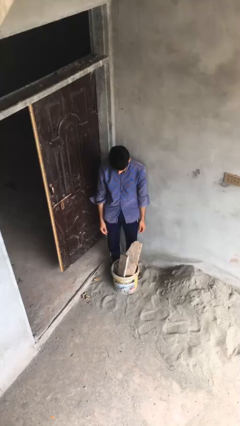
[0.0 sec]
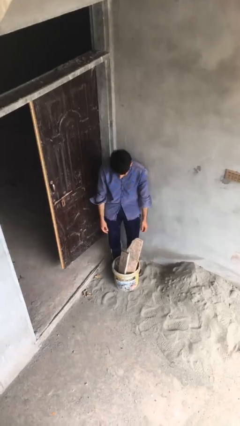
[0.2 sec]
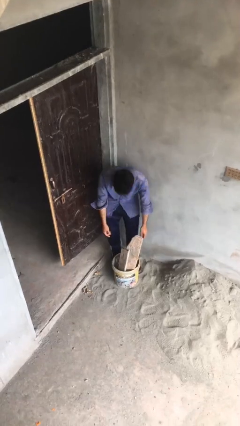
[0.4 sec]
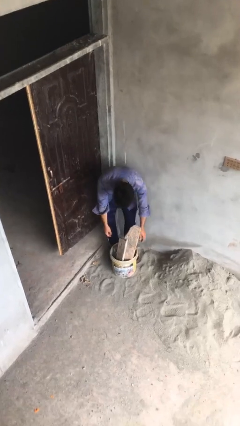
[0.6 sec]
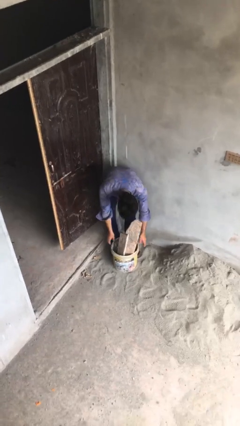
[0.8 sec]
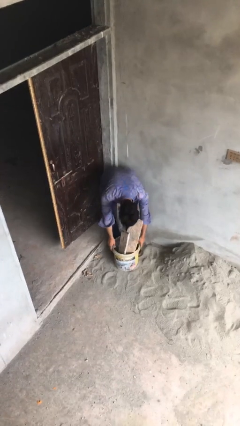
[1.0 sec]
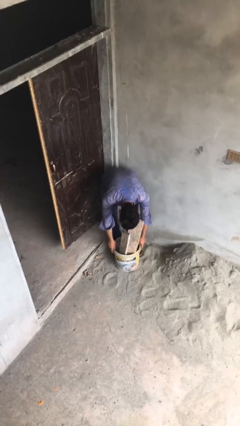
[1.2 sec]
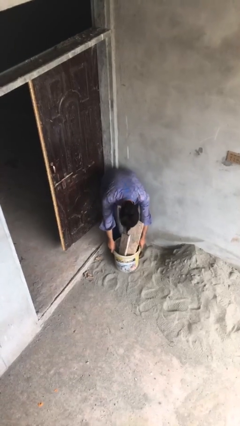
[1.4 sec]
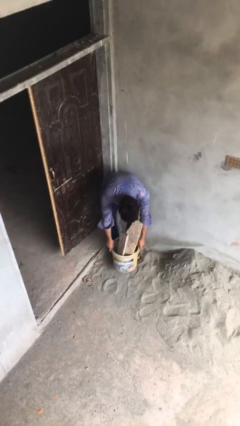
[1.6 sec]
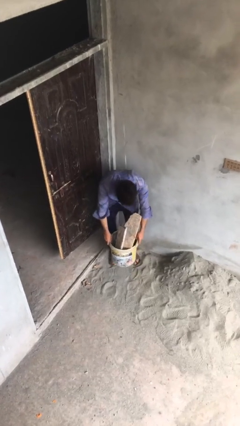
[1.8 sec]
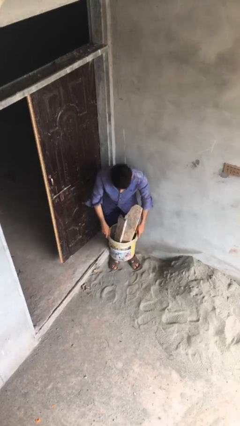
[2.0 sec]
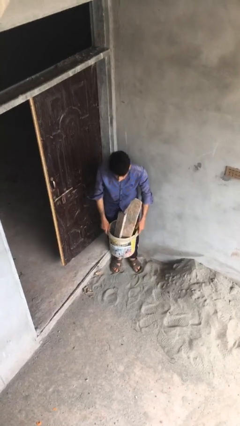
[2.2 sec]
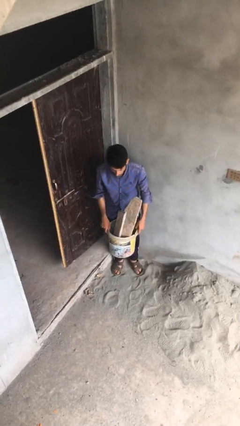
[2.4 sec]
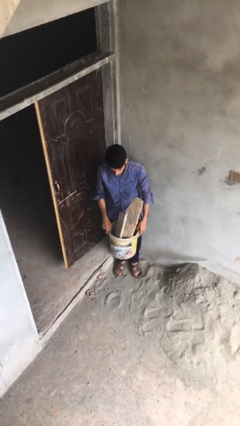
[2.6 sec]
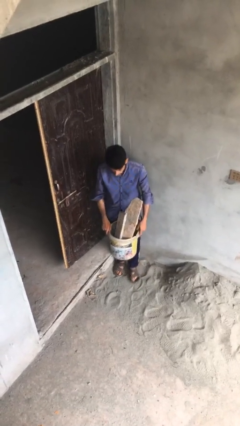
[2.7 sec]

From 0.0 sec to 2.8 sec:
person picks up object from floor

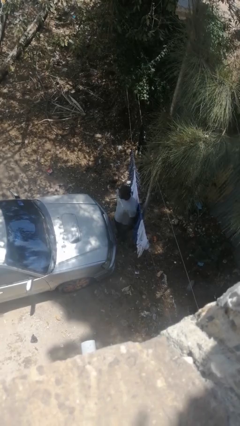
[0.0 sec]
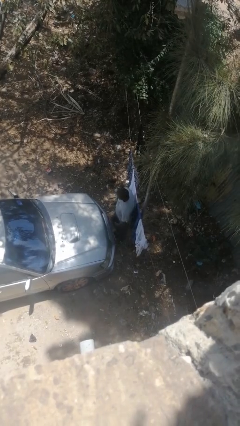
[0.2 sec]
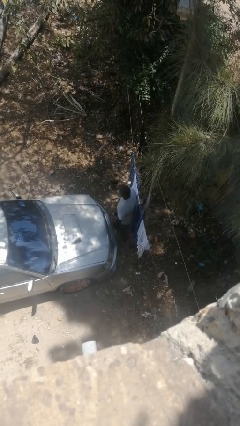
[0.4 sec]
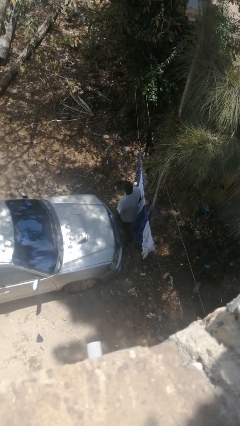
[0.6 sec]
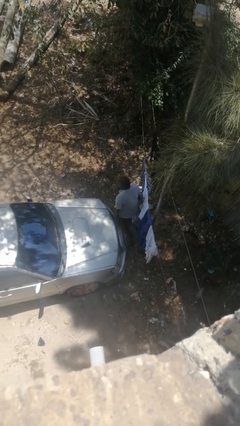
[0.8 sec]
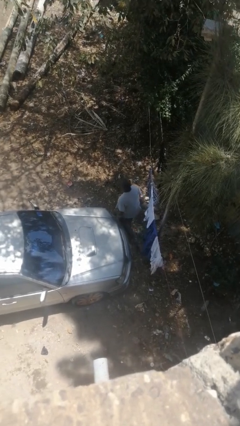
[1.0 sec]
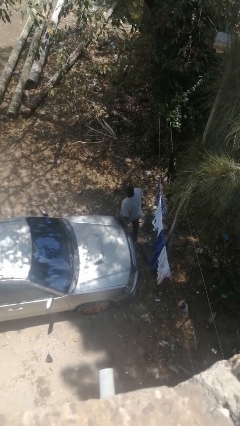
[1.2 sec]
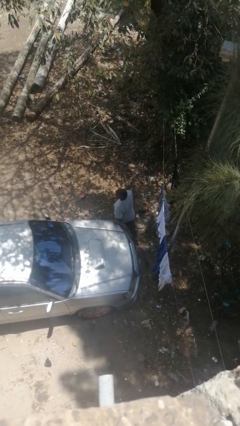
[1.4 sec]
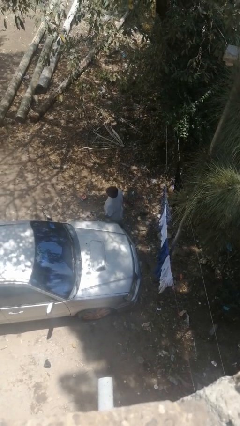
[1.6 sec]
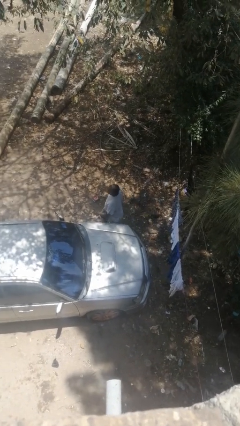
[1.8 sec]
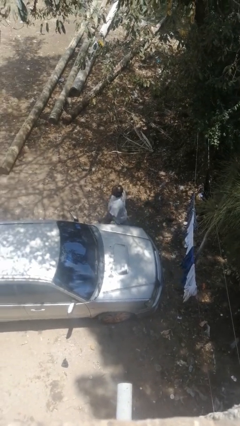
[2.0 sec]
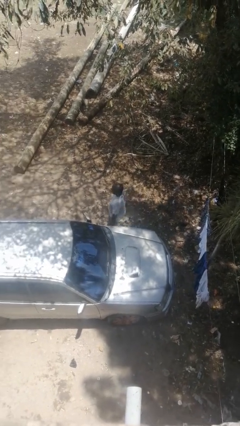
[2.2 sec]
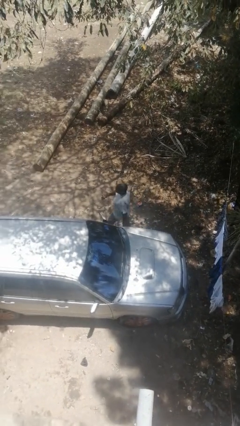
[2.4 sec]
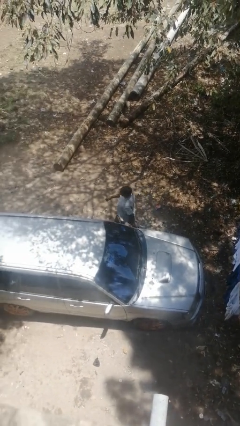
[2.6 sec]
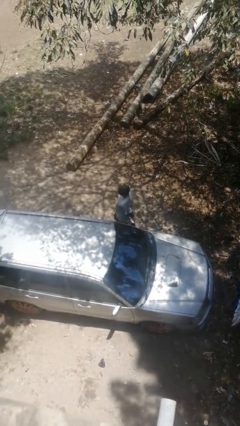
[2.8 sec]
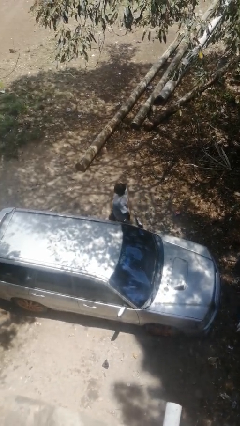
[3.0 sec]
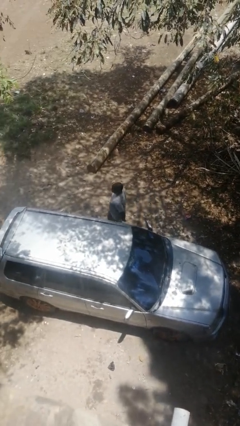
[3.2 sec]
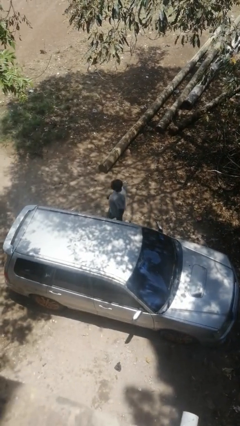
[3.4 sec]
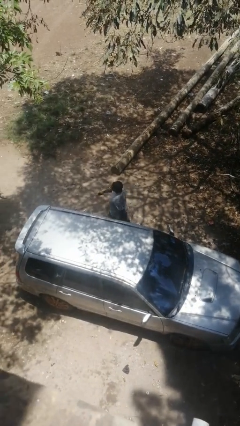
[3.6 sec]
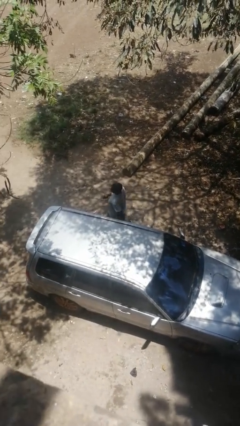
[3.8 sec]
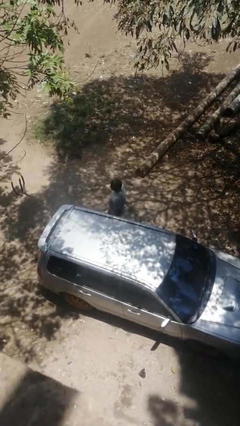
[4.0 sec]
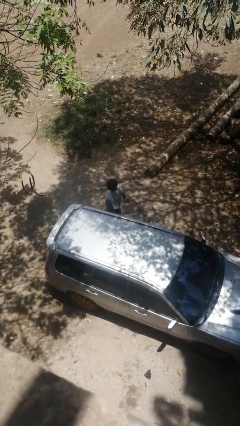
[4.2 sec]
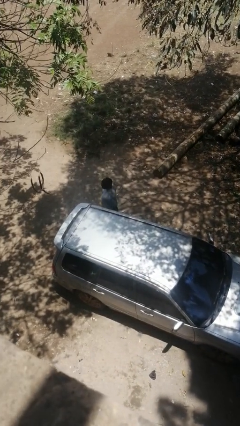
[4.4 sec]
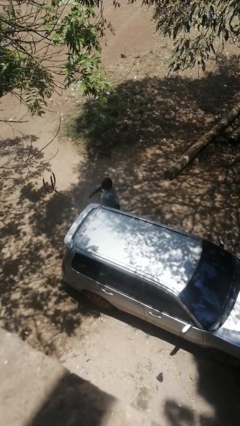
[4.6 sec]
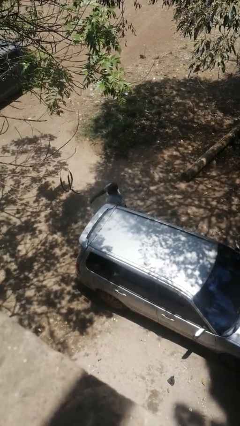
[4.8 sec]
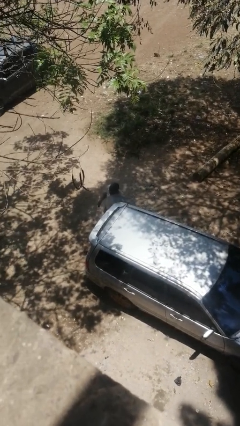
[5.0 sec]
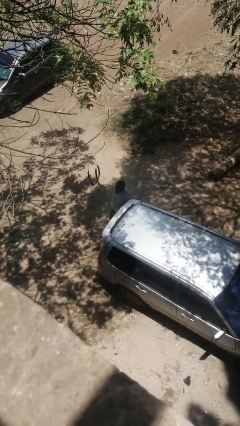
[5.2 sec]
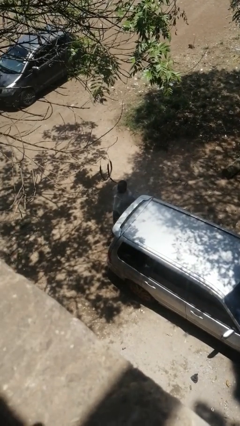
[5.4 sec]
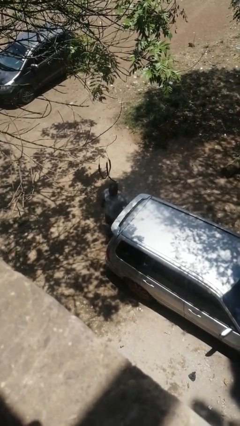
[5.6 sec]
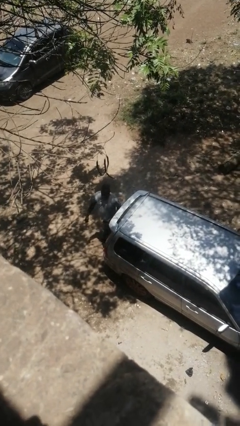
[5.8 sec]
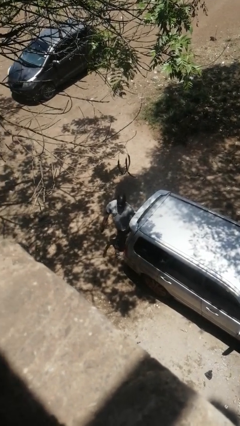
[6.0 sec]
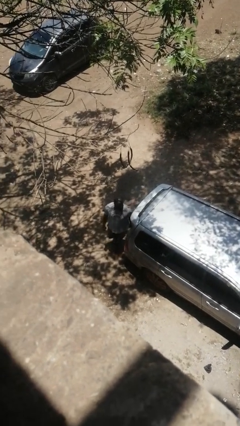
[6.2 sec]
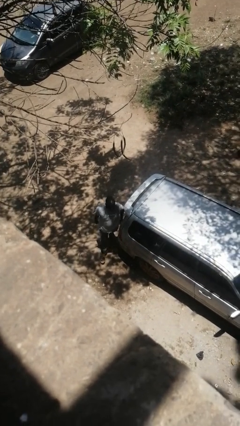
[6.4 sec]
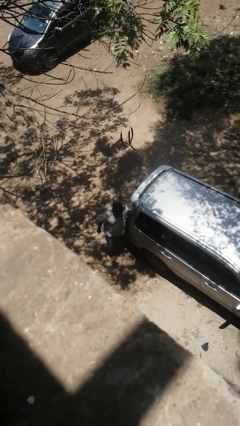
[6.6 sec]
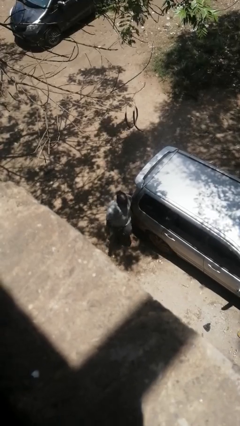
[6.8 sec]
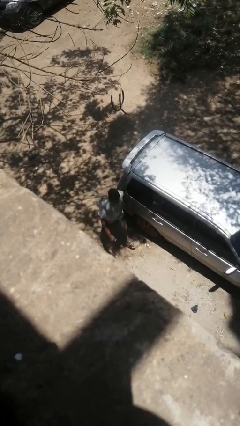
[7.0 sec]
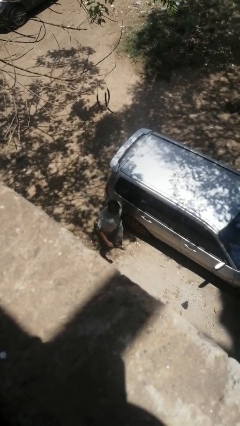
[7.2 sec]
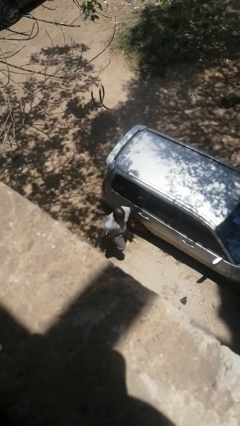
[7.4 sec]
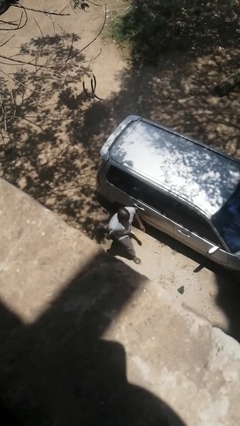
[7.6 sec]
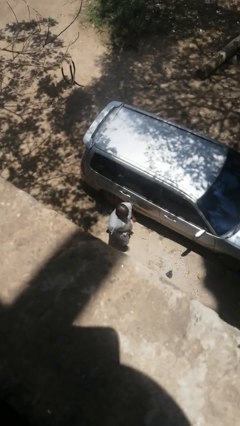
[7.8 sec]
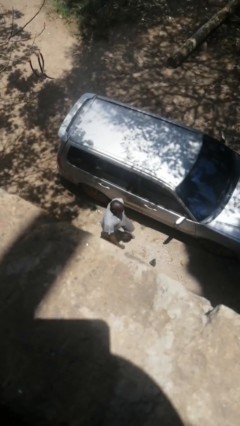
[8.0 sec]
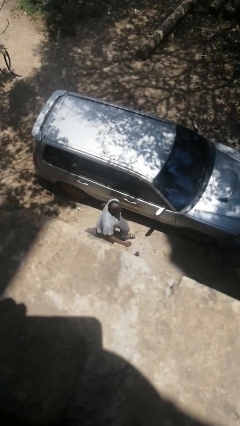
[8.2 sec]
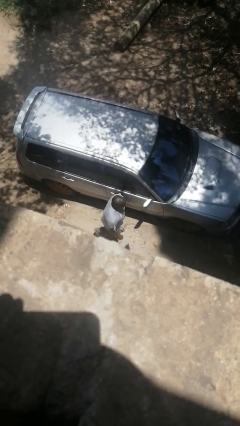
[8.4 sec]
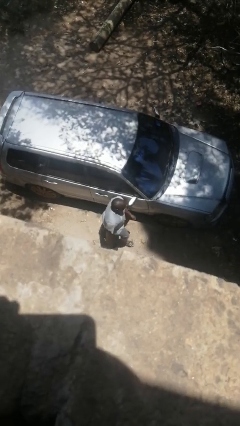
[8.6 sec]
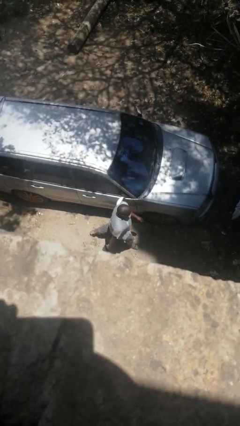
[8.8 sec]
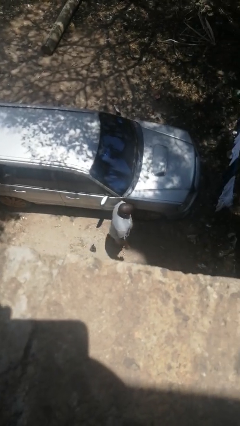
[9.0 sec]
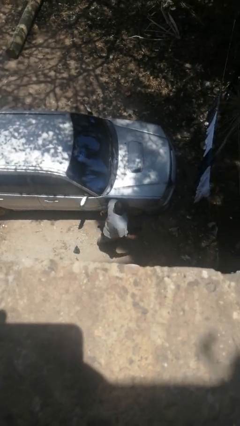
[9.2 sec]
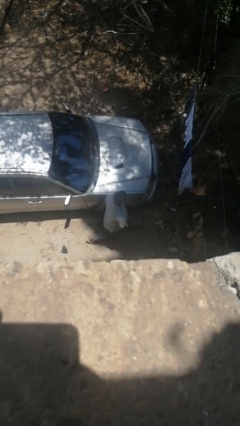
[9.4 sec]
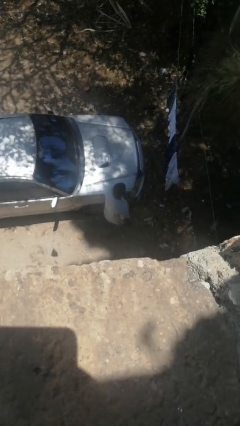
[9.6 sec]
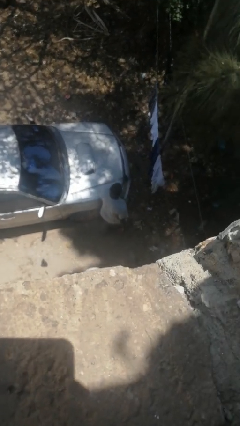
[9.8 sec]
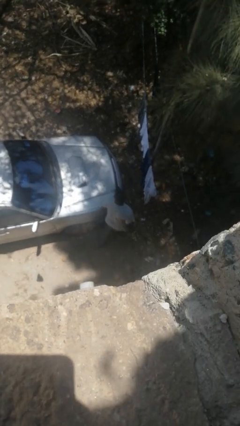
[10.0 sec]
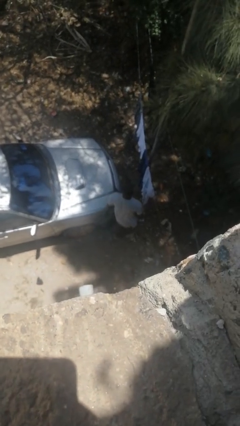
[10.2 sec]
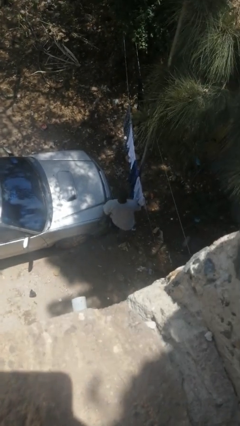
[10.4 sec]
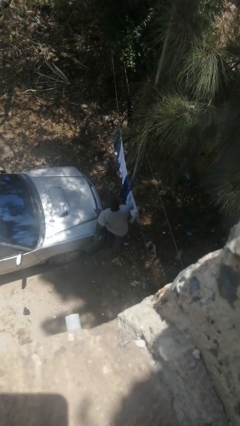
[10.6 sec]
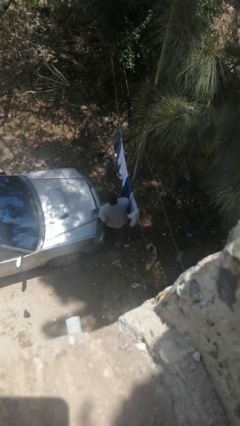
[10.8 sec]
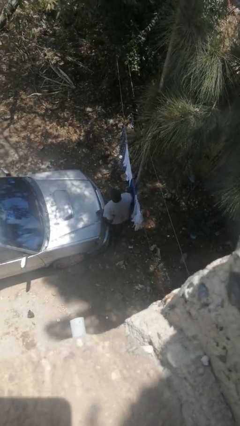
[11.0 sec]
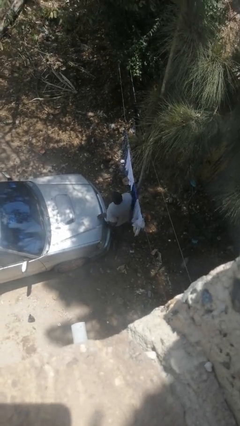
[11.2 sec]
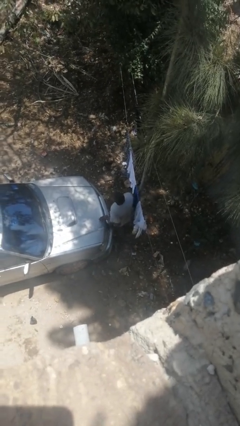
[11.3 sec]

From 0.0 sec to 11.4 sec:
person walks around car

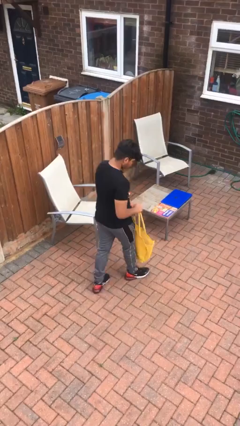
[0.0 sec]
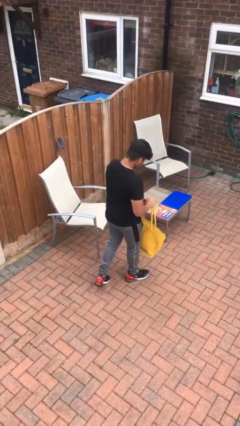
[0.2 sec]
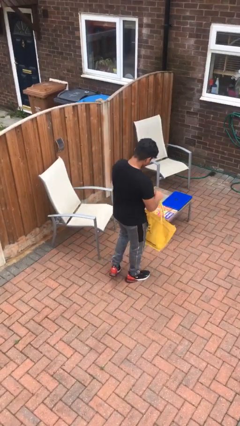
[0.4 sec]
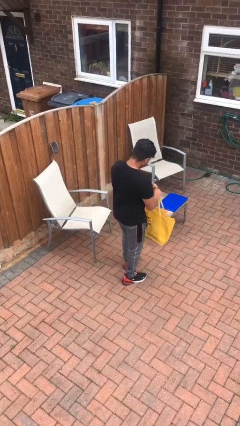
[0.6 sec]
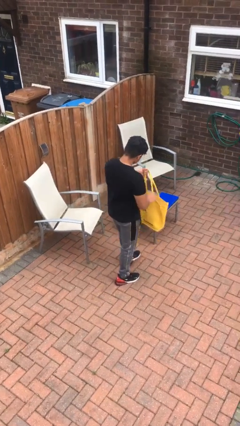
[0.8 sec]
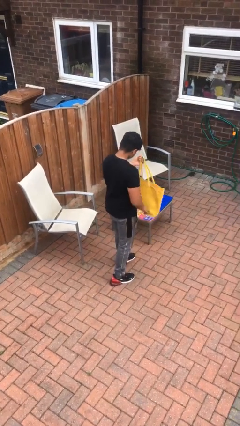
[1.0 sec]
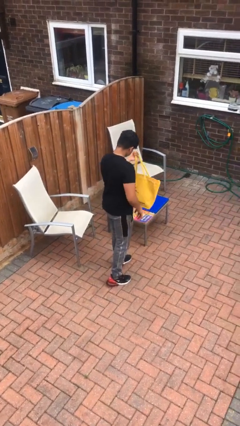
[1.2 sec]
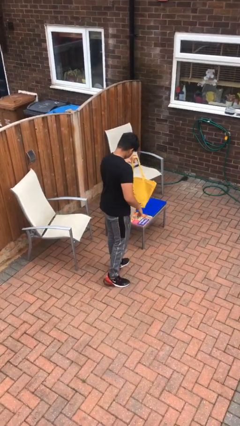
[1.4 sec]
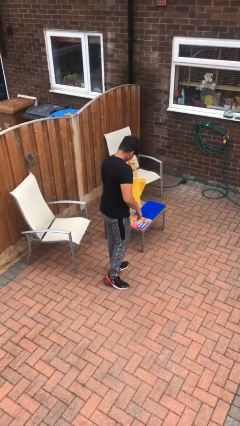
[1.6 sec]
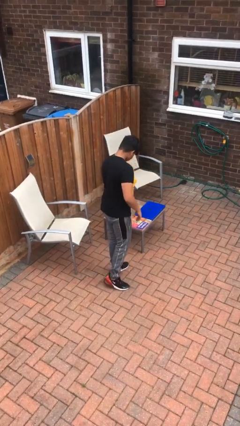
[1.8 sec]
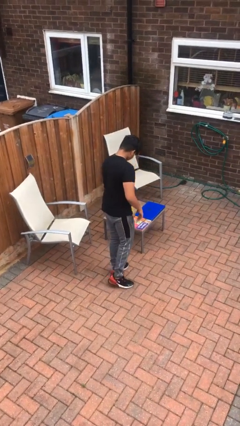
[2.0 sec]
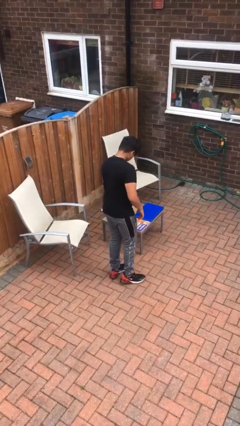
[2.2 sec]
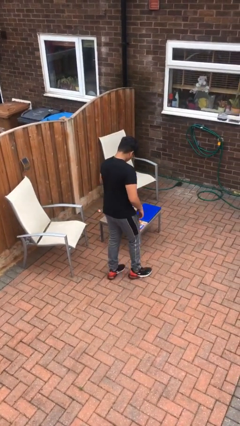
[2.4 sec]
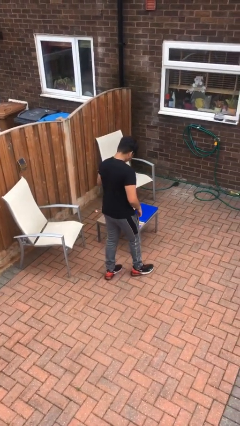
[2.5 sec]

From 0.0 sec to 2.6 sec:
person puts down object on table

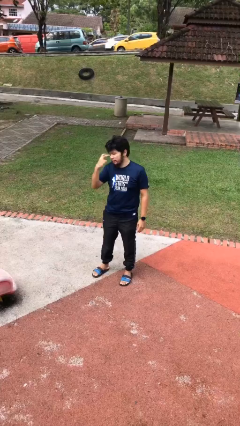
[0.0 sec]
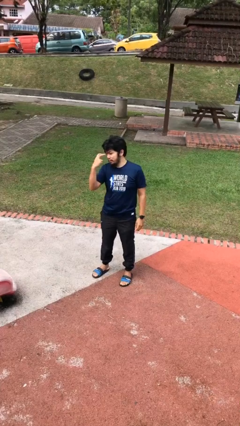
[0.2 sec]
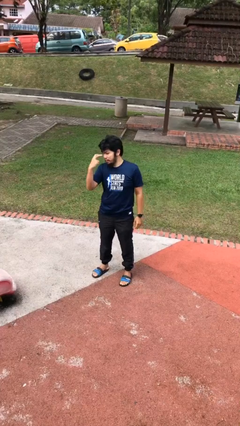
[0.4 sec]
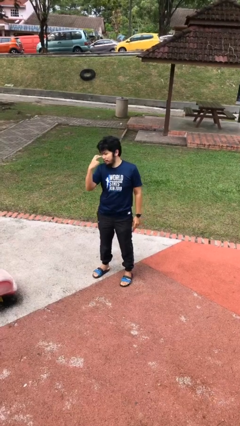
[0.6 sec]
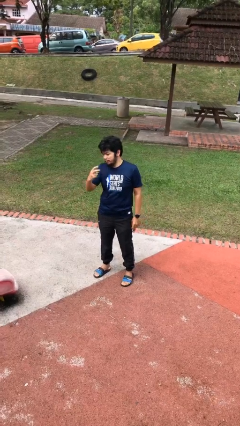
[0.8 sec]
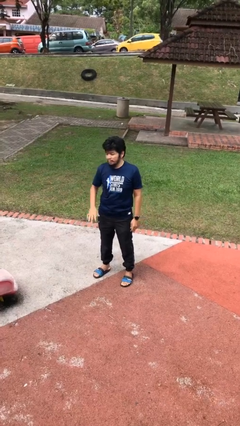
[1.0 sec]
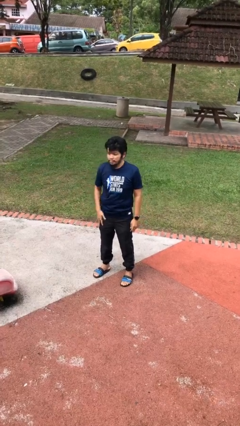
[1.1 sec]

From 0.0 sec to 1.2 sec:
person gestures watch closely
